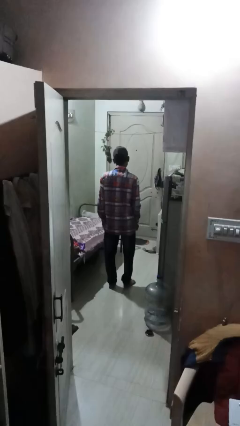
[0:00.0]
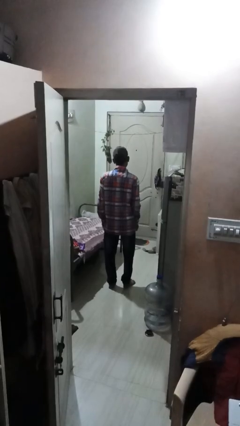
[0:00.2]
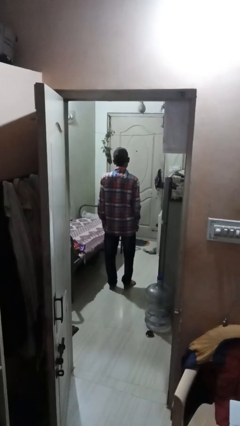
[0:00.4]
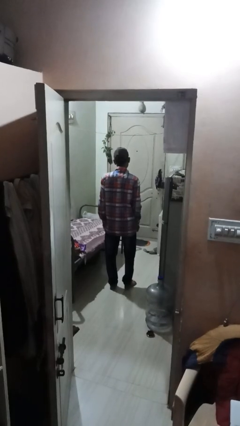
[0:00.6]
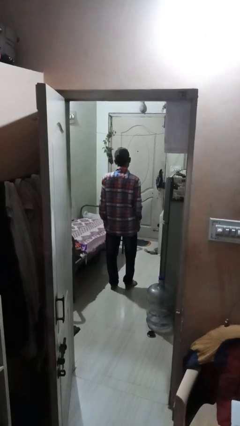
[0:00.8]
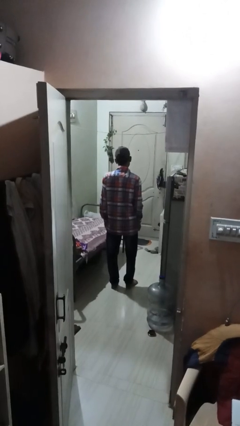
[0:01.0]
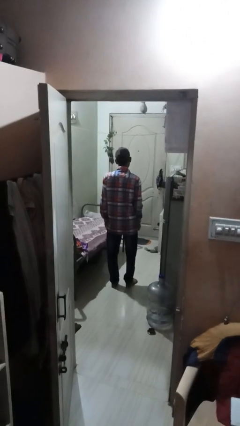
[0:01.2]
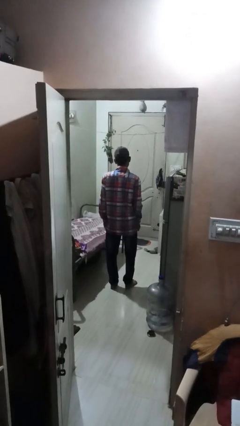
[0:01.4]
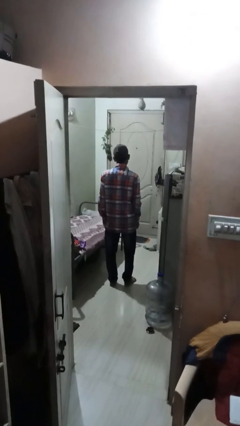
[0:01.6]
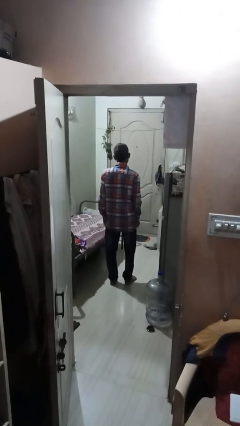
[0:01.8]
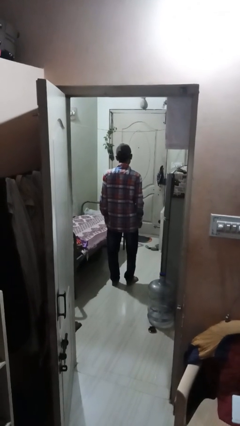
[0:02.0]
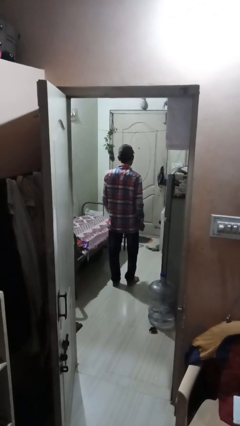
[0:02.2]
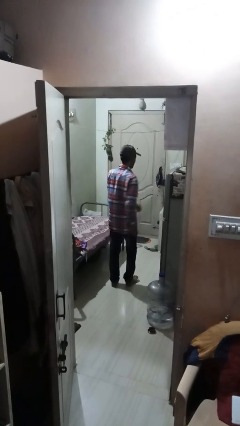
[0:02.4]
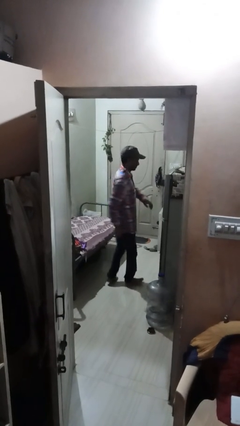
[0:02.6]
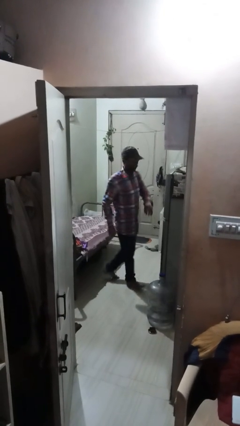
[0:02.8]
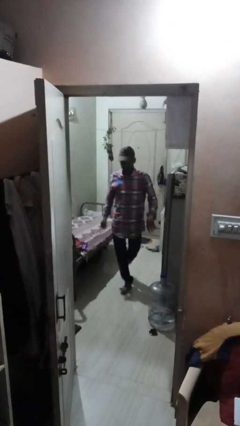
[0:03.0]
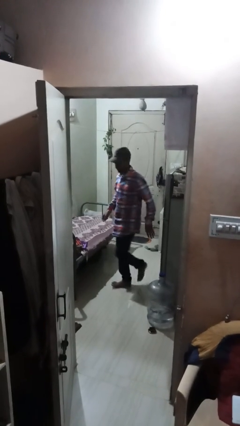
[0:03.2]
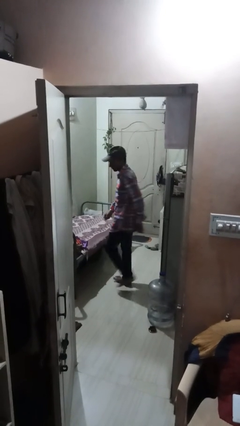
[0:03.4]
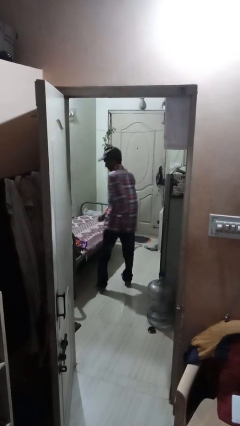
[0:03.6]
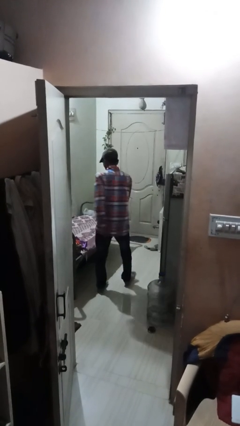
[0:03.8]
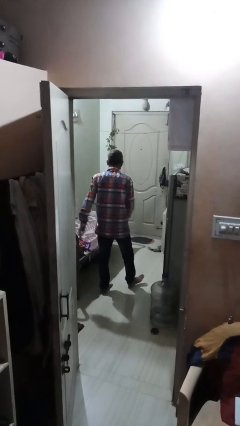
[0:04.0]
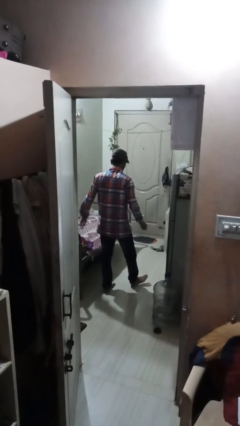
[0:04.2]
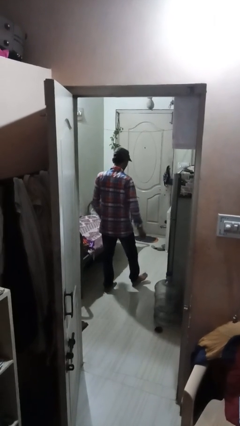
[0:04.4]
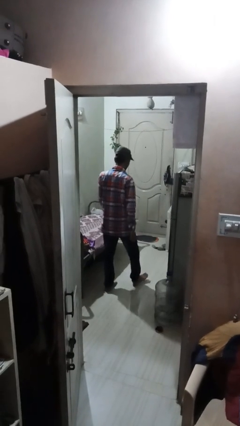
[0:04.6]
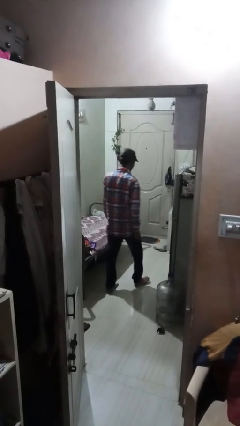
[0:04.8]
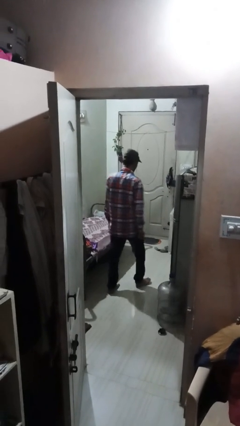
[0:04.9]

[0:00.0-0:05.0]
person twirls

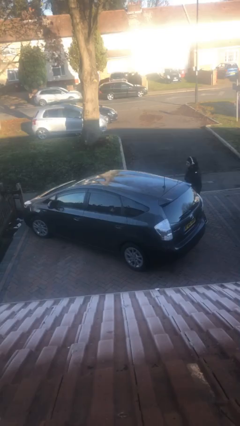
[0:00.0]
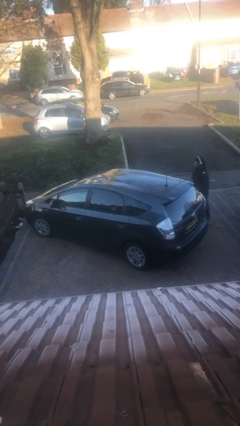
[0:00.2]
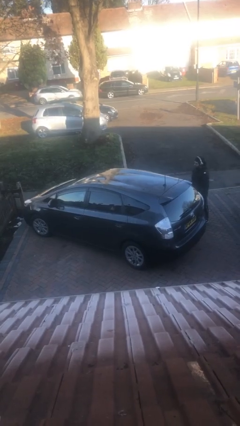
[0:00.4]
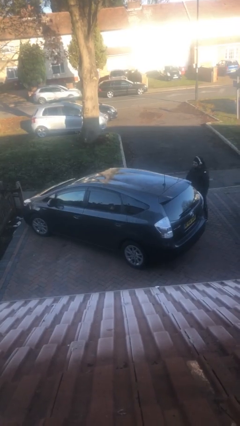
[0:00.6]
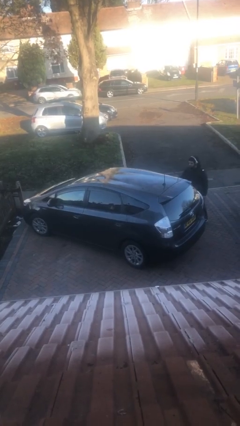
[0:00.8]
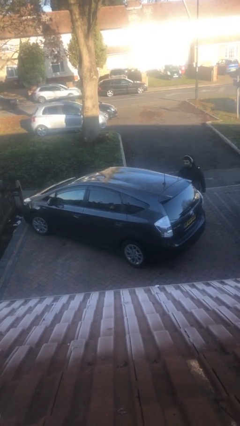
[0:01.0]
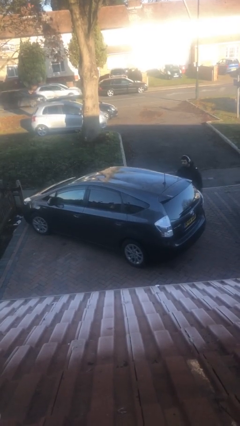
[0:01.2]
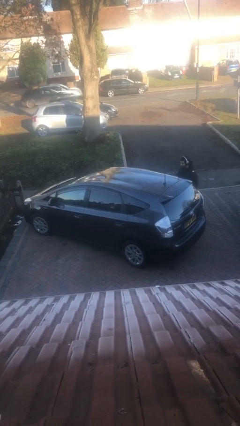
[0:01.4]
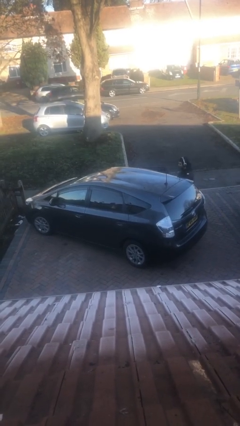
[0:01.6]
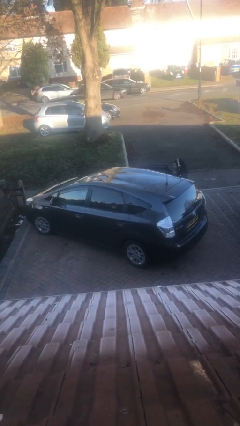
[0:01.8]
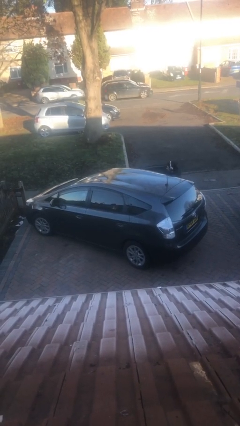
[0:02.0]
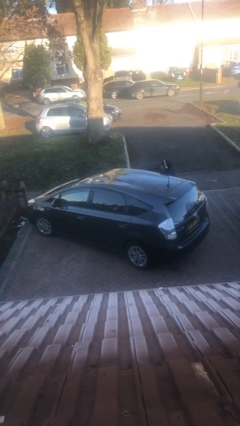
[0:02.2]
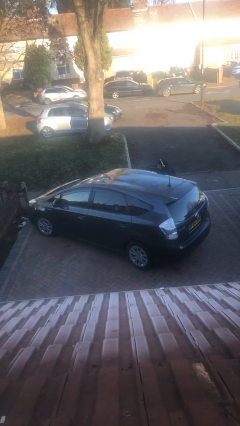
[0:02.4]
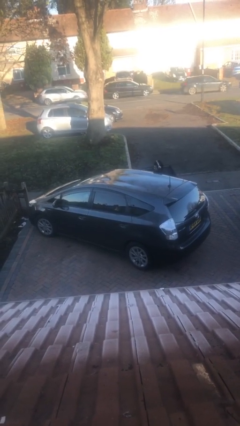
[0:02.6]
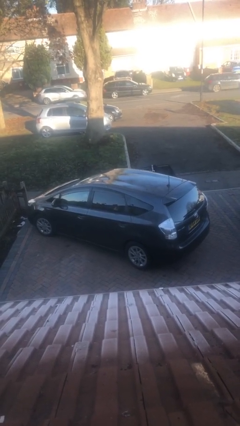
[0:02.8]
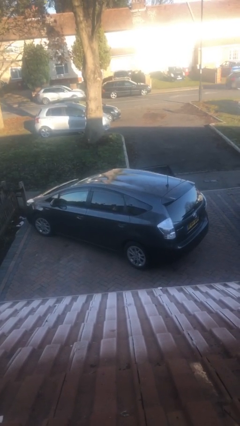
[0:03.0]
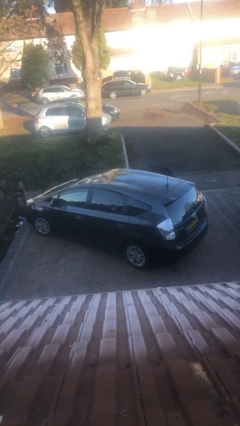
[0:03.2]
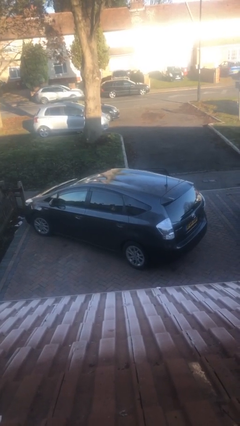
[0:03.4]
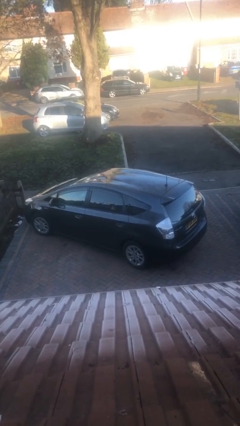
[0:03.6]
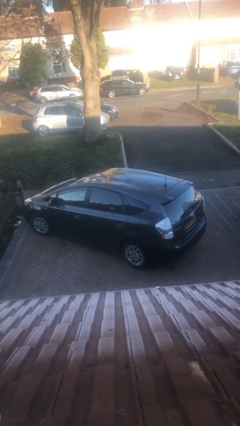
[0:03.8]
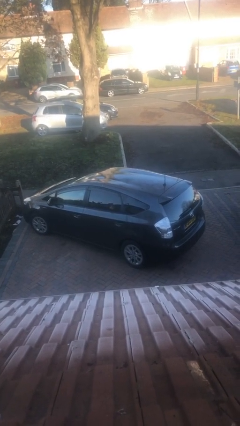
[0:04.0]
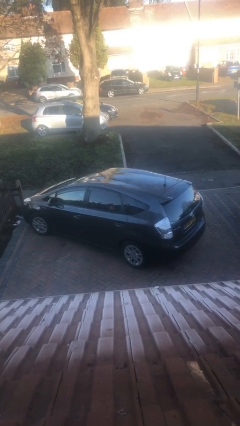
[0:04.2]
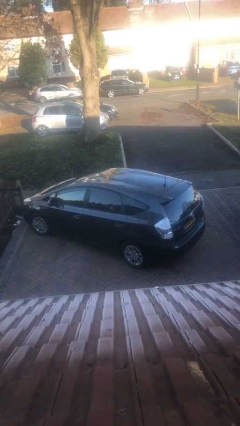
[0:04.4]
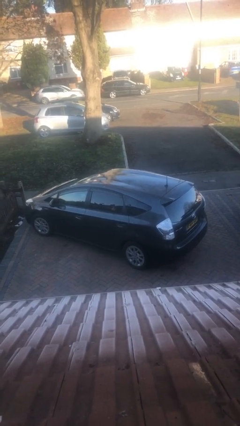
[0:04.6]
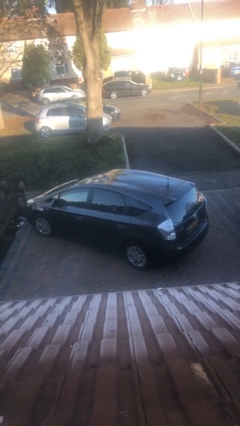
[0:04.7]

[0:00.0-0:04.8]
car picks up person

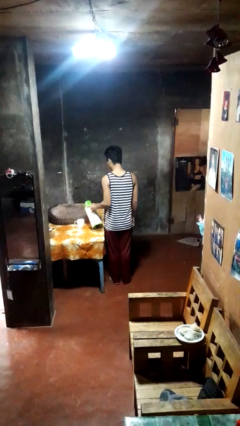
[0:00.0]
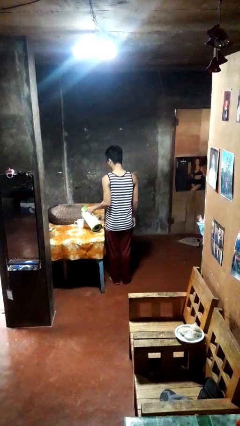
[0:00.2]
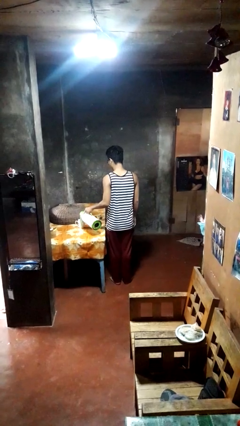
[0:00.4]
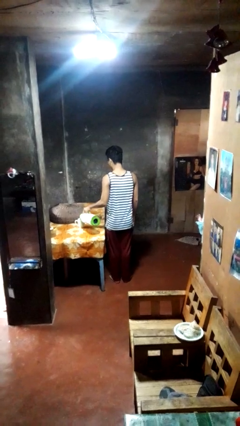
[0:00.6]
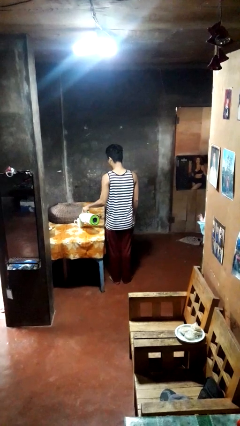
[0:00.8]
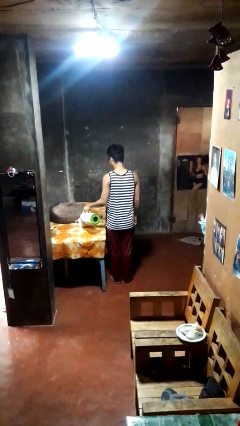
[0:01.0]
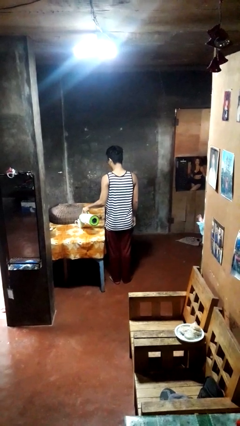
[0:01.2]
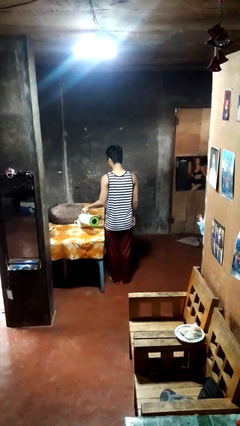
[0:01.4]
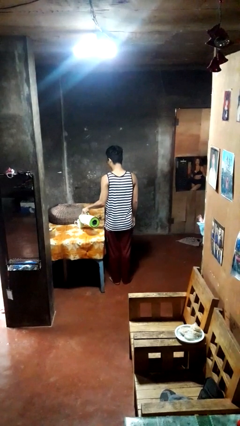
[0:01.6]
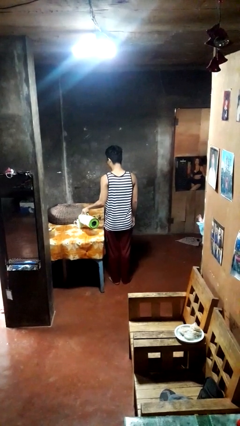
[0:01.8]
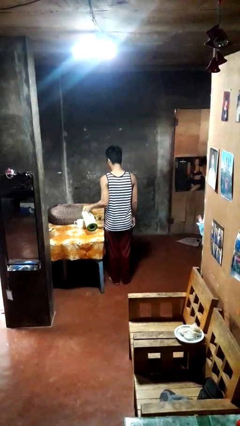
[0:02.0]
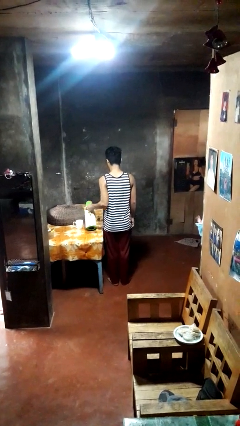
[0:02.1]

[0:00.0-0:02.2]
person pours coffee into mug

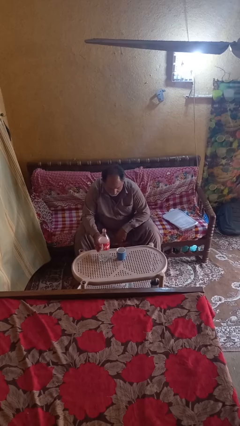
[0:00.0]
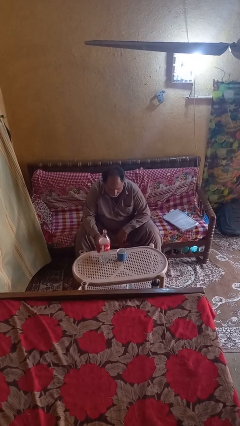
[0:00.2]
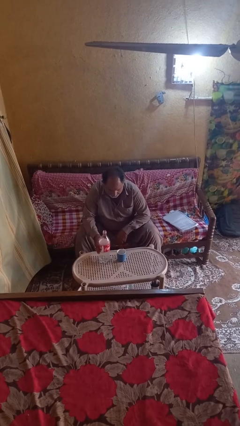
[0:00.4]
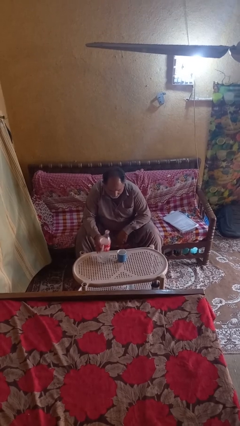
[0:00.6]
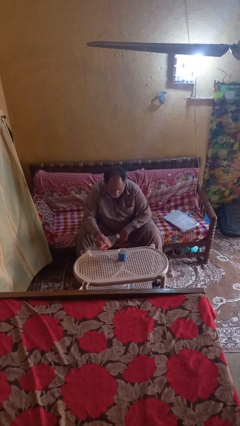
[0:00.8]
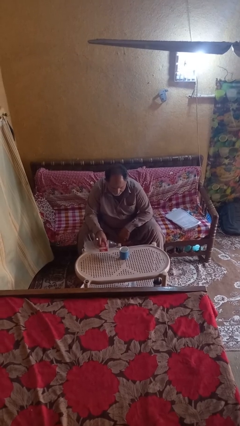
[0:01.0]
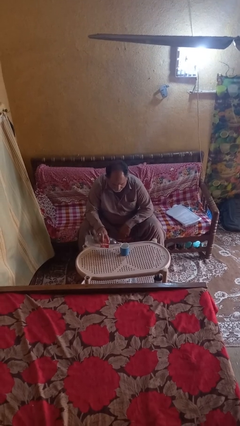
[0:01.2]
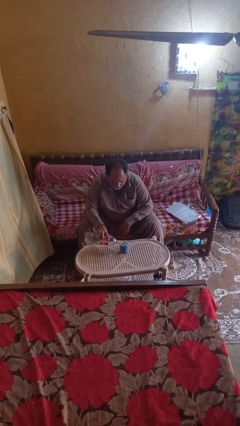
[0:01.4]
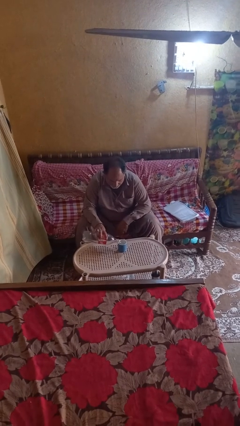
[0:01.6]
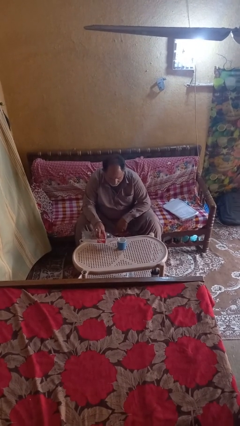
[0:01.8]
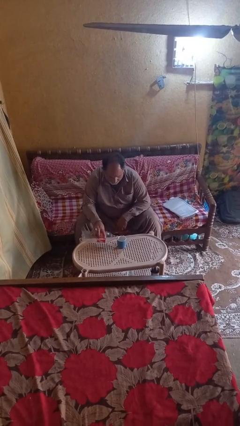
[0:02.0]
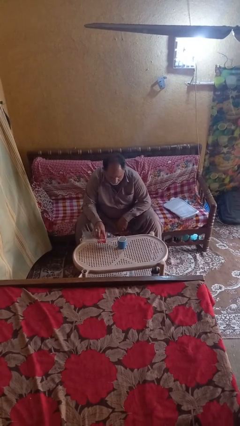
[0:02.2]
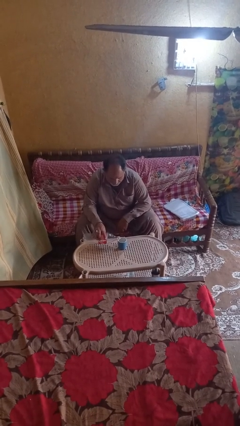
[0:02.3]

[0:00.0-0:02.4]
person pours liquid into cup

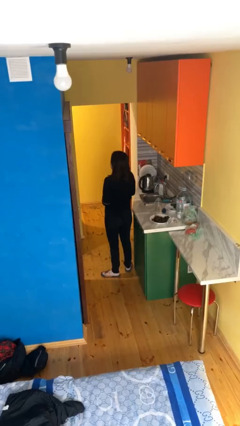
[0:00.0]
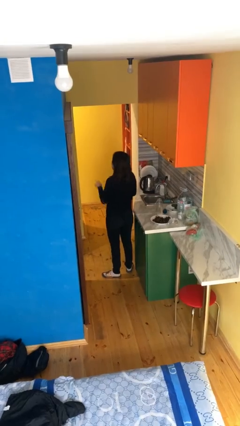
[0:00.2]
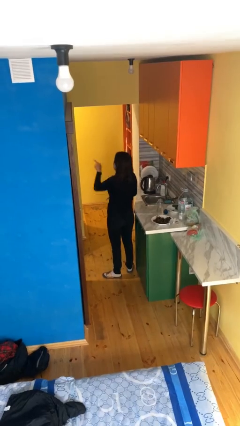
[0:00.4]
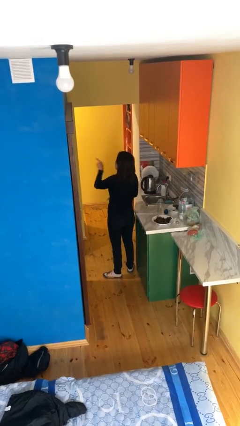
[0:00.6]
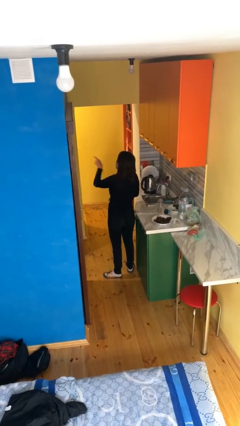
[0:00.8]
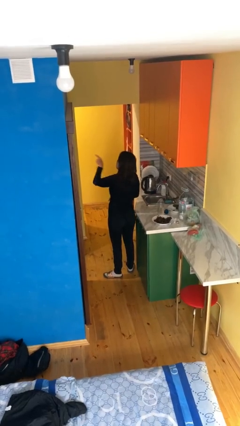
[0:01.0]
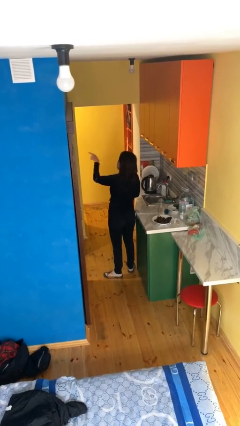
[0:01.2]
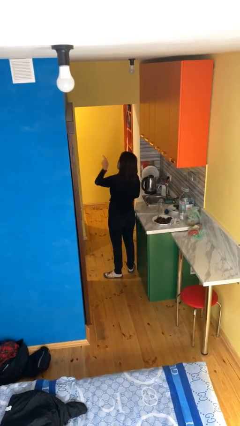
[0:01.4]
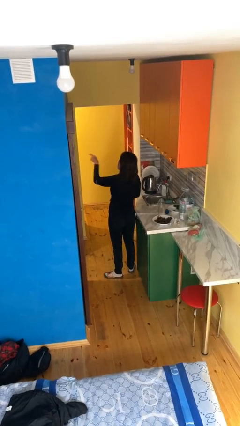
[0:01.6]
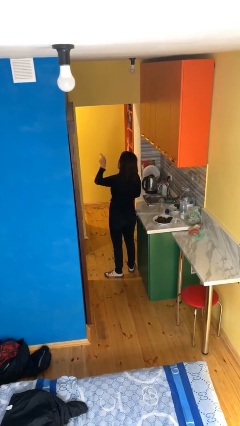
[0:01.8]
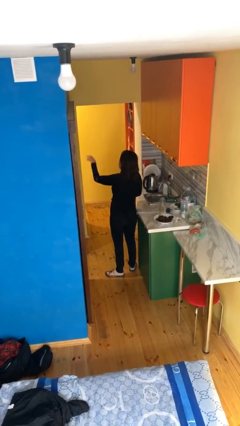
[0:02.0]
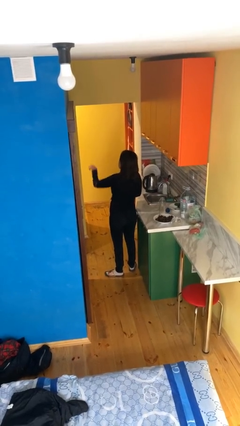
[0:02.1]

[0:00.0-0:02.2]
person points at person

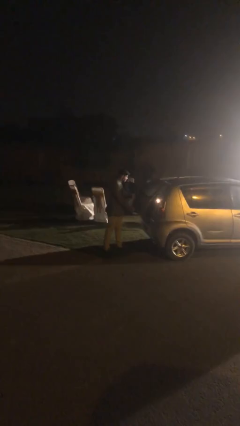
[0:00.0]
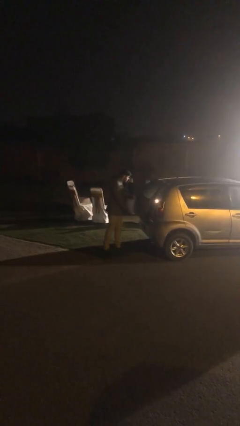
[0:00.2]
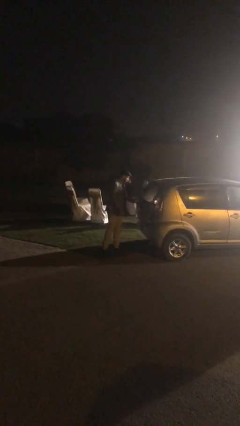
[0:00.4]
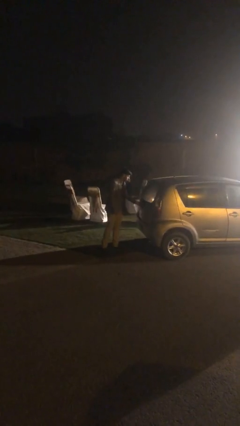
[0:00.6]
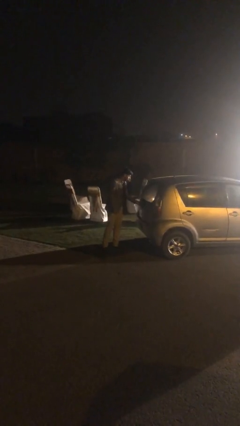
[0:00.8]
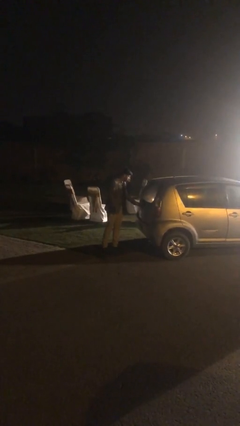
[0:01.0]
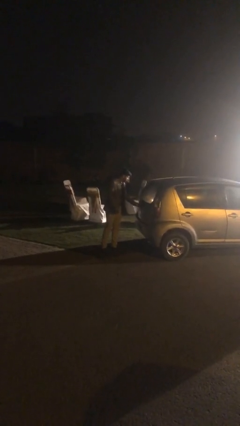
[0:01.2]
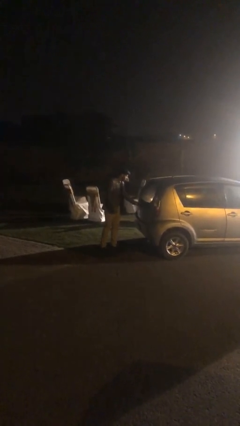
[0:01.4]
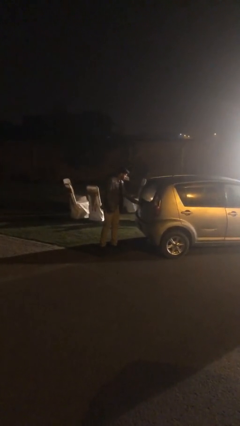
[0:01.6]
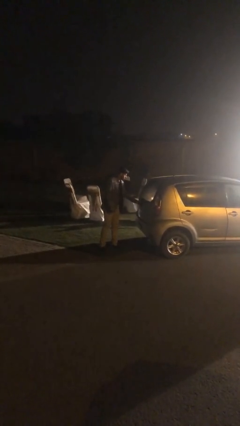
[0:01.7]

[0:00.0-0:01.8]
person closes car trunk
